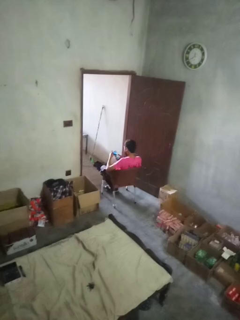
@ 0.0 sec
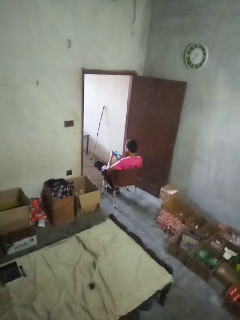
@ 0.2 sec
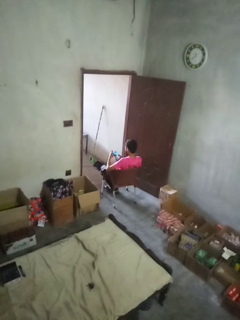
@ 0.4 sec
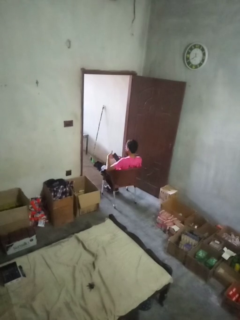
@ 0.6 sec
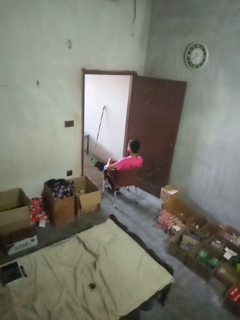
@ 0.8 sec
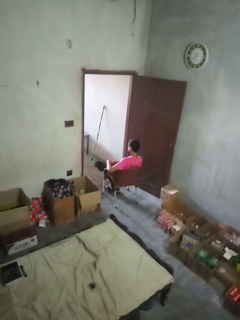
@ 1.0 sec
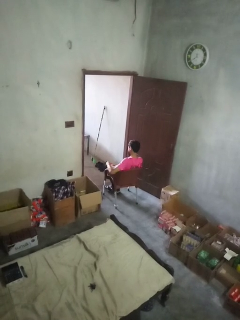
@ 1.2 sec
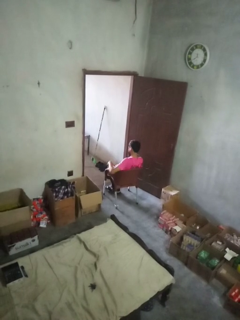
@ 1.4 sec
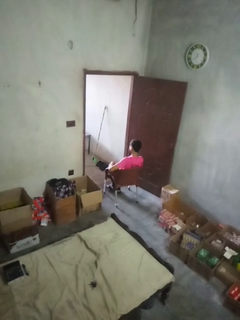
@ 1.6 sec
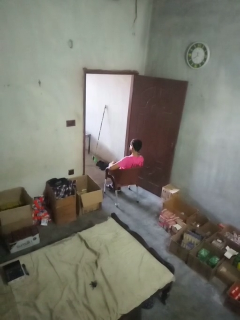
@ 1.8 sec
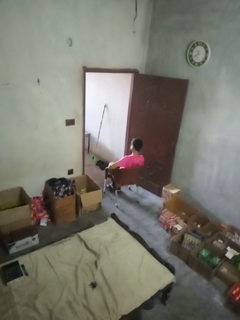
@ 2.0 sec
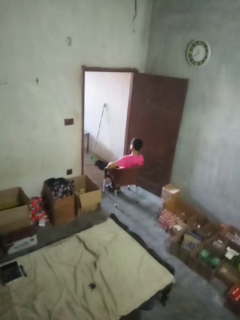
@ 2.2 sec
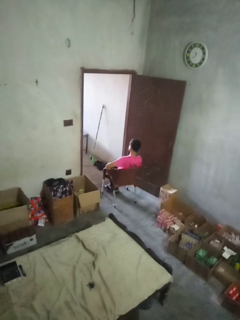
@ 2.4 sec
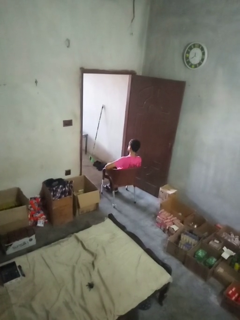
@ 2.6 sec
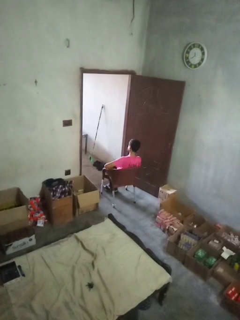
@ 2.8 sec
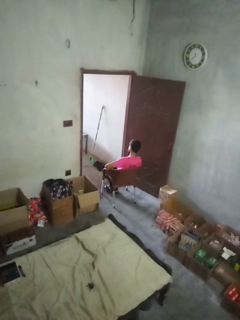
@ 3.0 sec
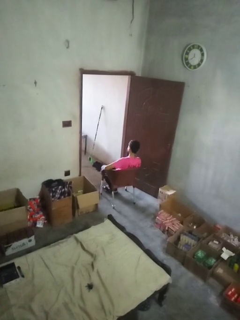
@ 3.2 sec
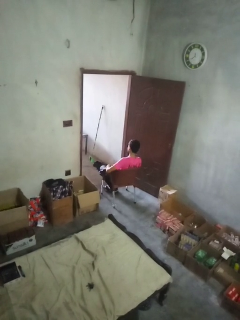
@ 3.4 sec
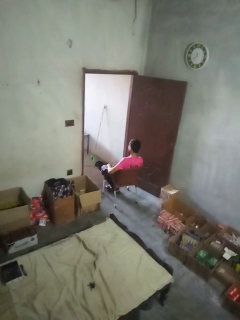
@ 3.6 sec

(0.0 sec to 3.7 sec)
person puts phone into pocket

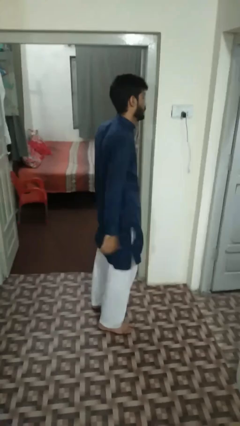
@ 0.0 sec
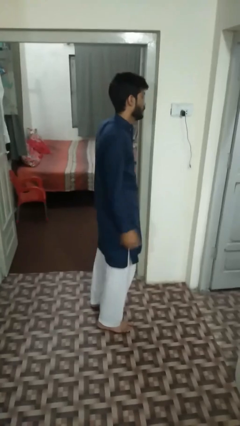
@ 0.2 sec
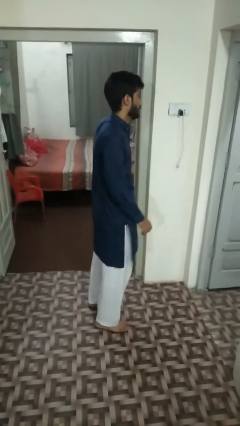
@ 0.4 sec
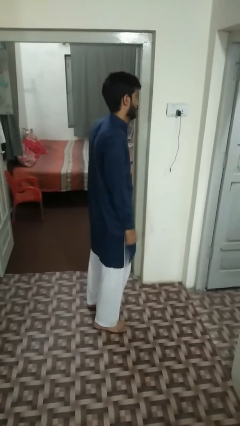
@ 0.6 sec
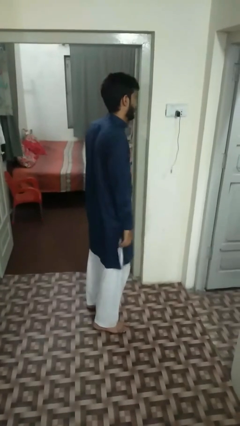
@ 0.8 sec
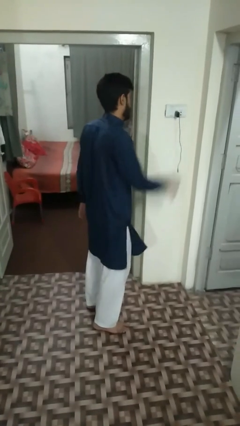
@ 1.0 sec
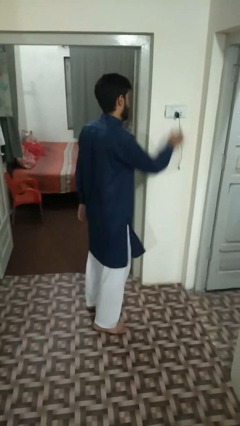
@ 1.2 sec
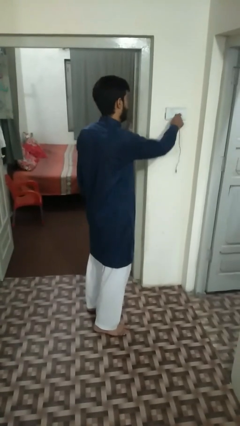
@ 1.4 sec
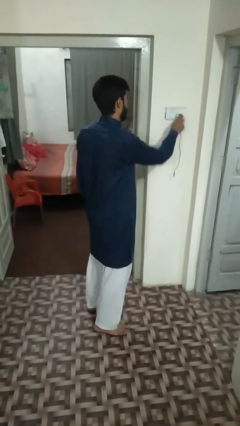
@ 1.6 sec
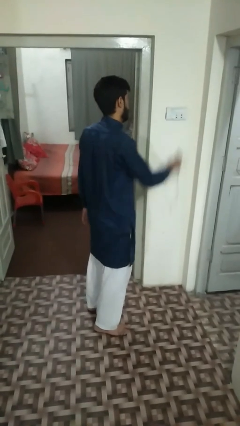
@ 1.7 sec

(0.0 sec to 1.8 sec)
person unplugs from electrical socket

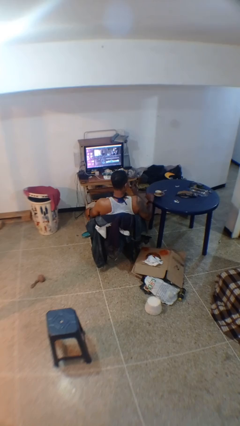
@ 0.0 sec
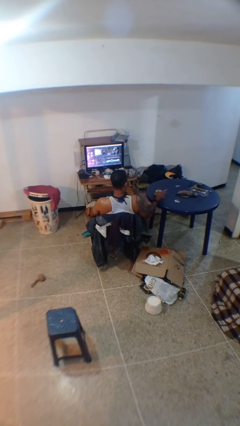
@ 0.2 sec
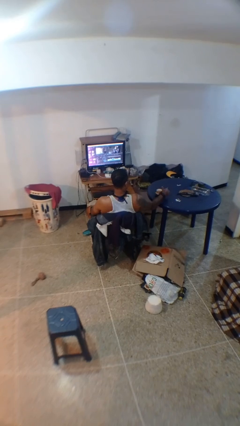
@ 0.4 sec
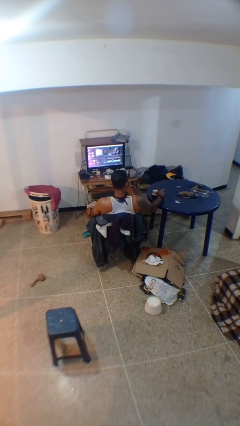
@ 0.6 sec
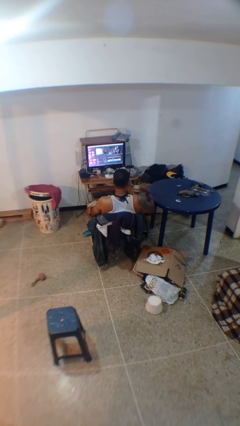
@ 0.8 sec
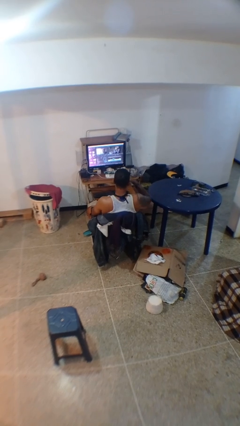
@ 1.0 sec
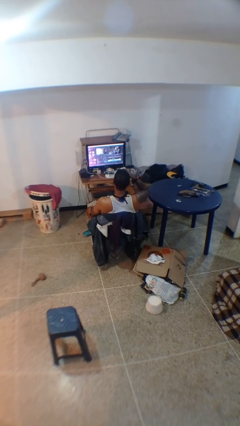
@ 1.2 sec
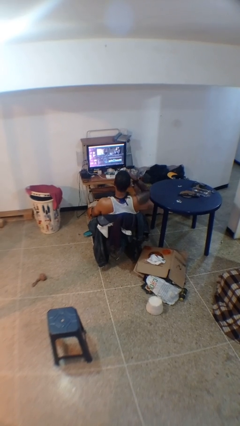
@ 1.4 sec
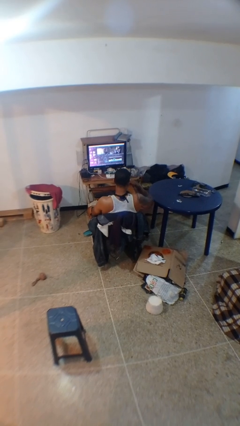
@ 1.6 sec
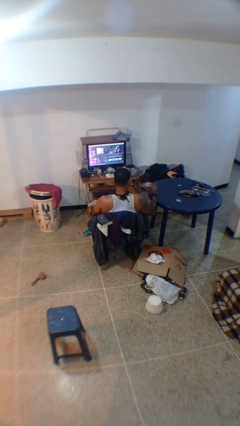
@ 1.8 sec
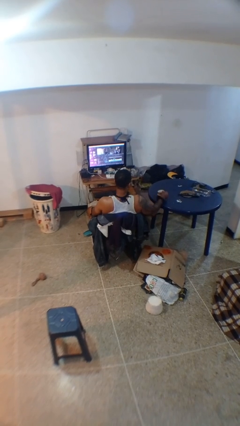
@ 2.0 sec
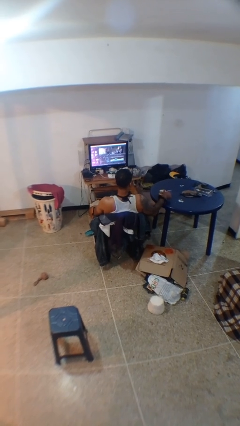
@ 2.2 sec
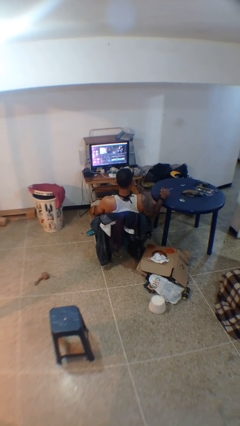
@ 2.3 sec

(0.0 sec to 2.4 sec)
person drinks from mug

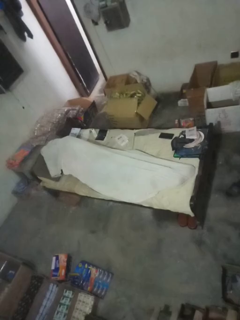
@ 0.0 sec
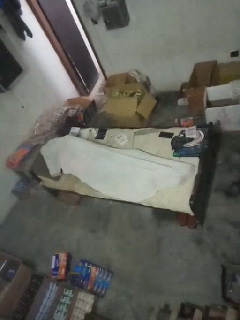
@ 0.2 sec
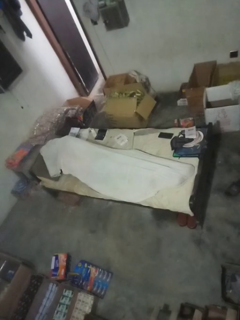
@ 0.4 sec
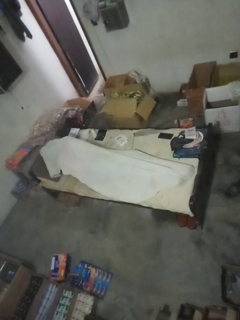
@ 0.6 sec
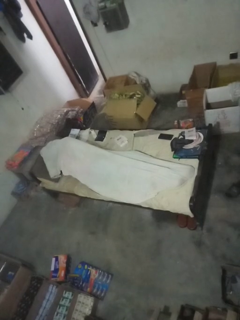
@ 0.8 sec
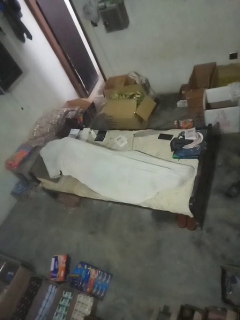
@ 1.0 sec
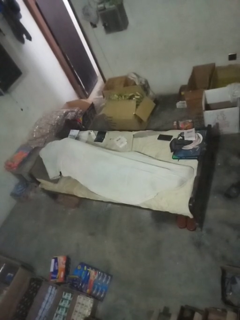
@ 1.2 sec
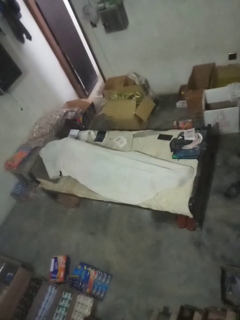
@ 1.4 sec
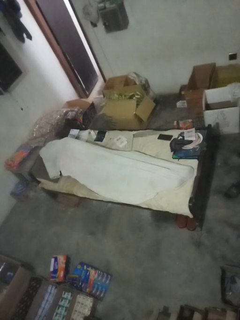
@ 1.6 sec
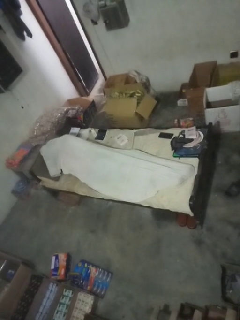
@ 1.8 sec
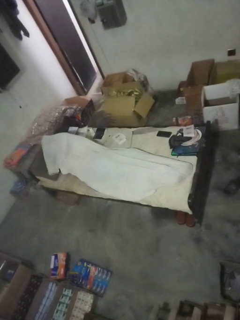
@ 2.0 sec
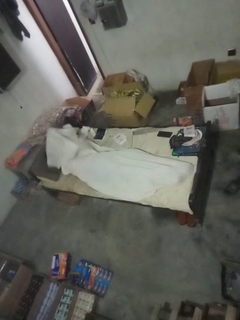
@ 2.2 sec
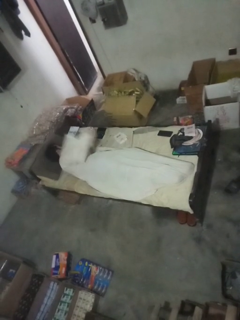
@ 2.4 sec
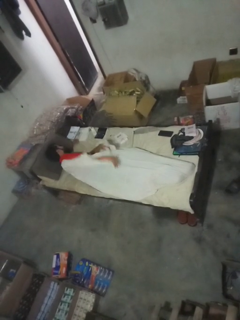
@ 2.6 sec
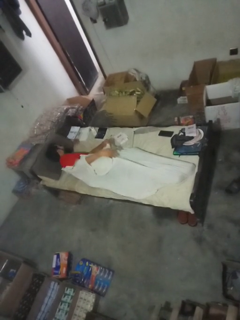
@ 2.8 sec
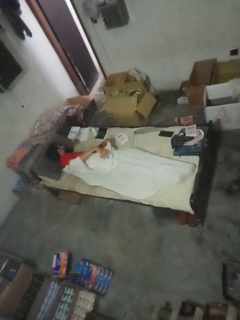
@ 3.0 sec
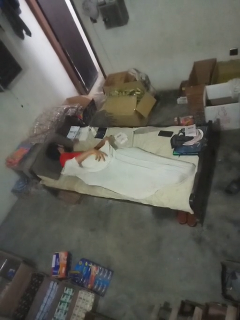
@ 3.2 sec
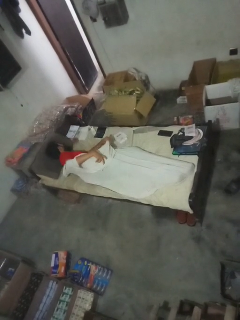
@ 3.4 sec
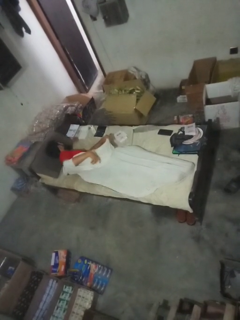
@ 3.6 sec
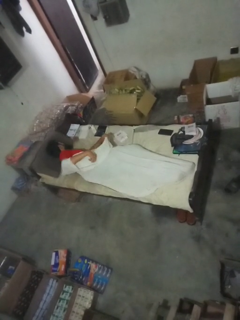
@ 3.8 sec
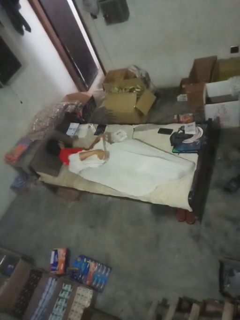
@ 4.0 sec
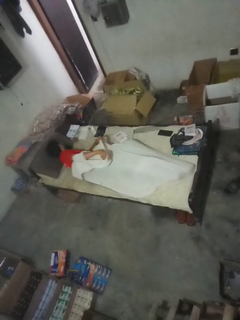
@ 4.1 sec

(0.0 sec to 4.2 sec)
person uncovers with bedsheets

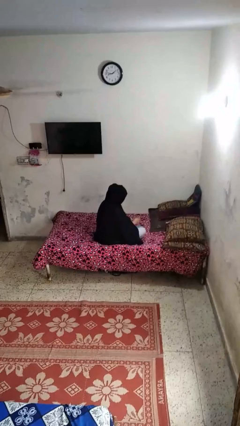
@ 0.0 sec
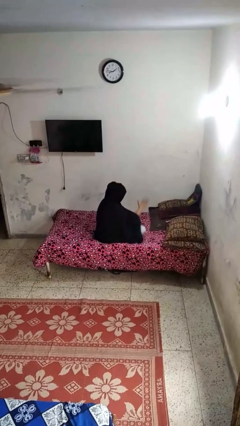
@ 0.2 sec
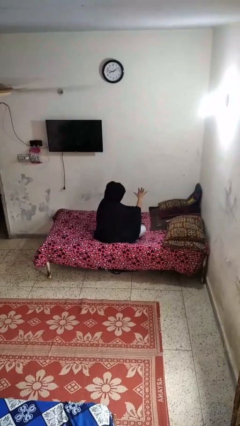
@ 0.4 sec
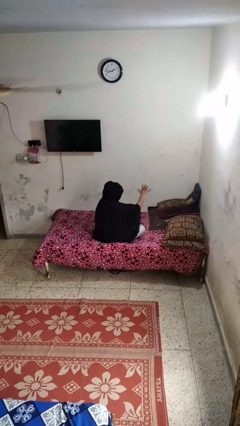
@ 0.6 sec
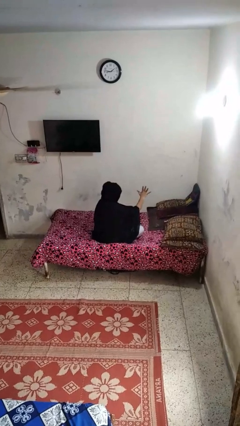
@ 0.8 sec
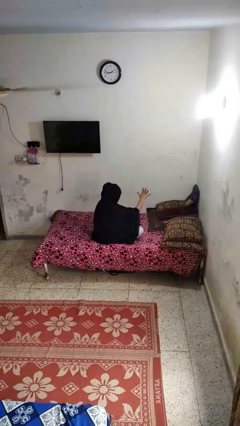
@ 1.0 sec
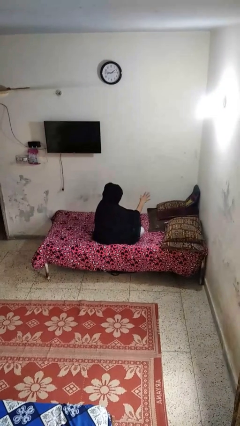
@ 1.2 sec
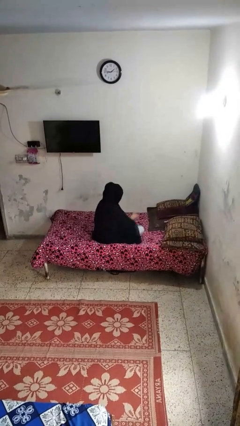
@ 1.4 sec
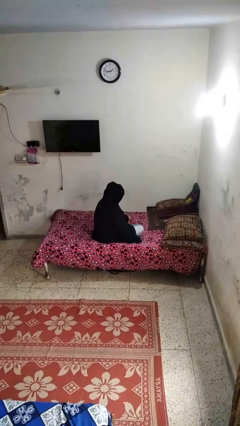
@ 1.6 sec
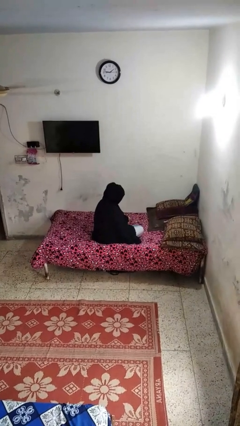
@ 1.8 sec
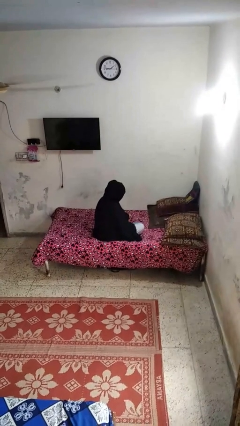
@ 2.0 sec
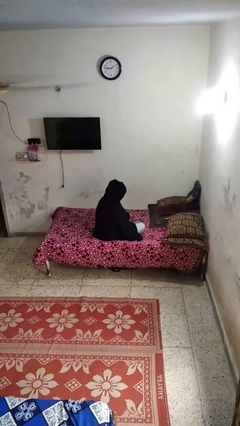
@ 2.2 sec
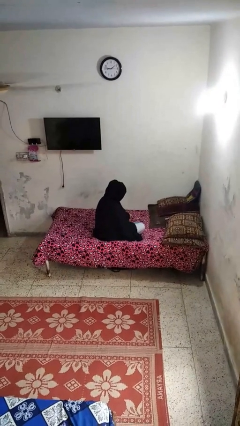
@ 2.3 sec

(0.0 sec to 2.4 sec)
person gestures number five

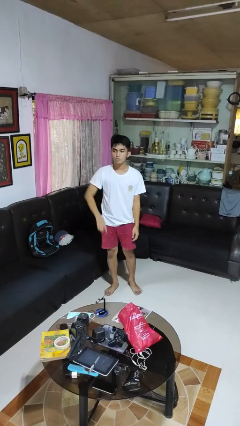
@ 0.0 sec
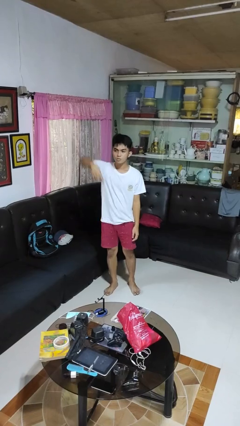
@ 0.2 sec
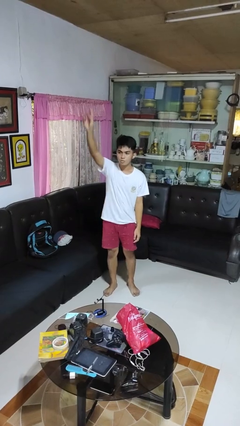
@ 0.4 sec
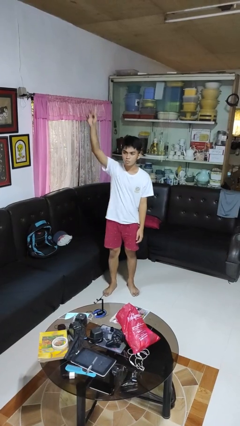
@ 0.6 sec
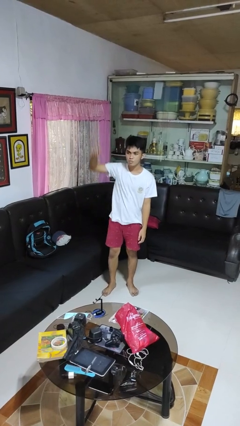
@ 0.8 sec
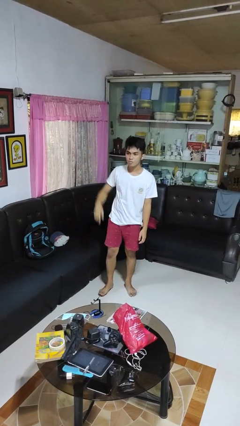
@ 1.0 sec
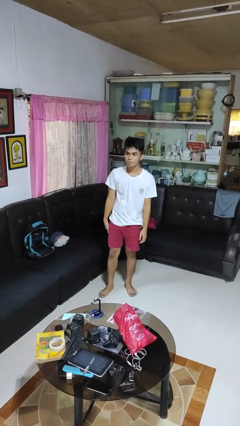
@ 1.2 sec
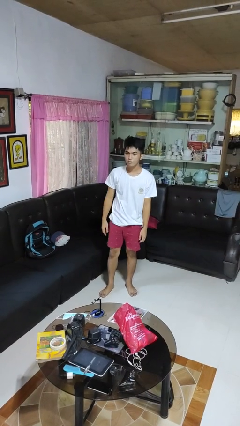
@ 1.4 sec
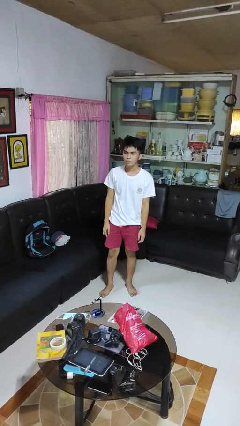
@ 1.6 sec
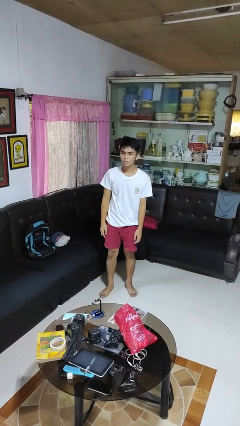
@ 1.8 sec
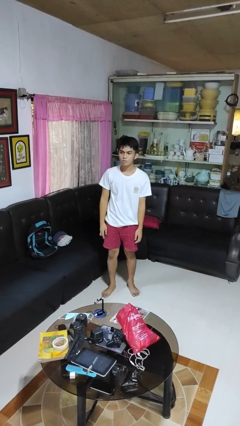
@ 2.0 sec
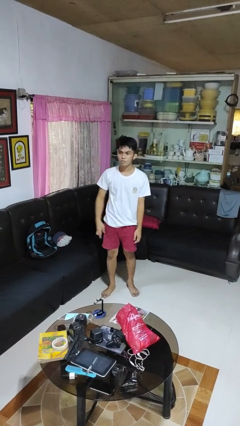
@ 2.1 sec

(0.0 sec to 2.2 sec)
person gestures swipe up

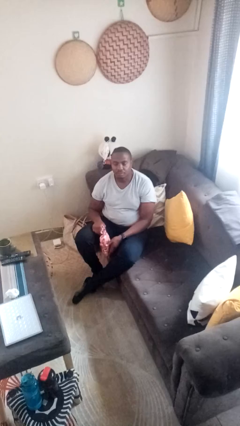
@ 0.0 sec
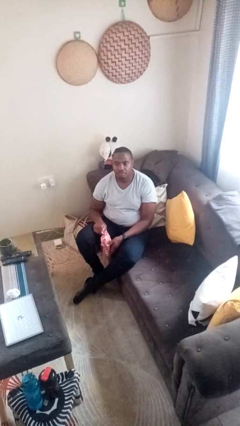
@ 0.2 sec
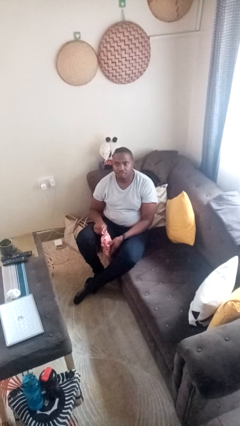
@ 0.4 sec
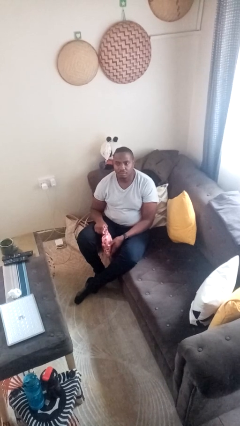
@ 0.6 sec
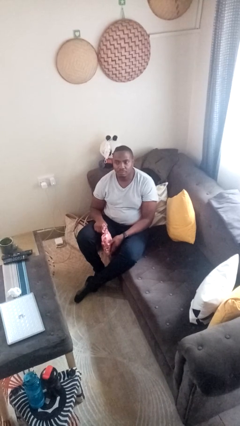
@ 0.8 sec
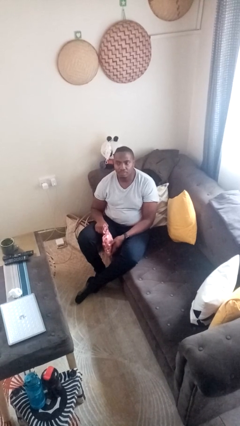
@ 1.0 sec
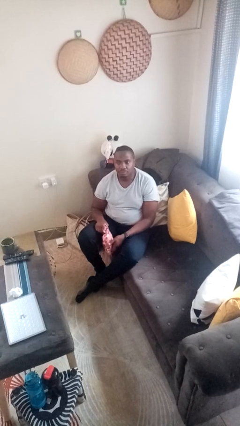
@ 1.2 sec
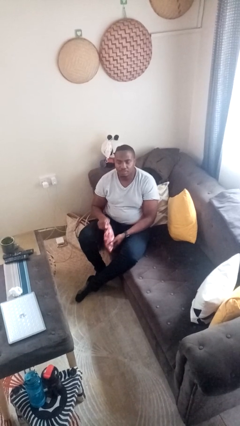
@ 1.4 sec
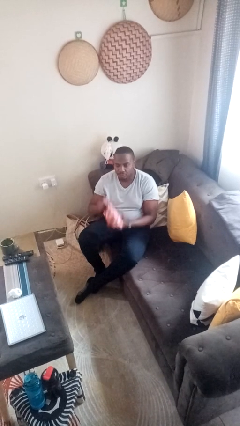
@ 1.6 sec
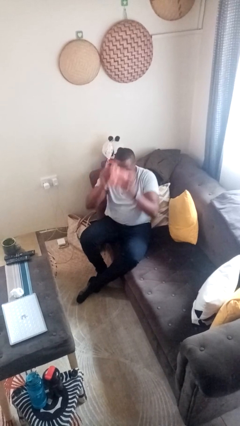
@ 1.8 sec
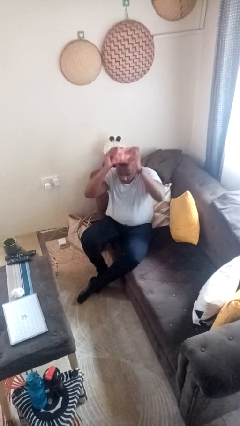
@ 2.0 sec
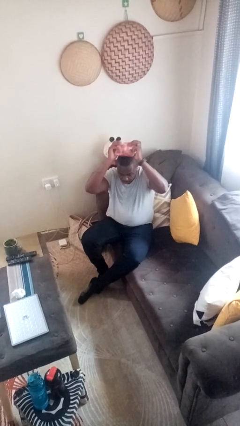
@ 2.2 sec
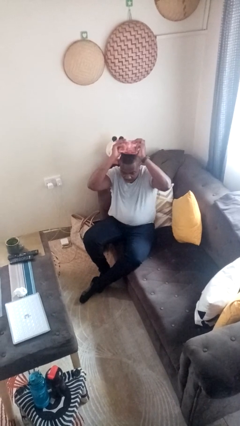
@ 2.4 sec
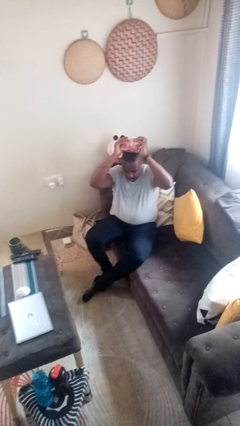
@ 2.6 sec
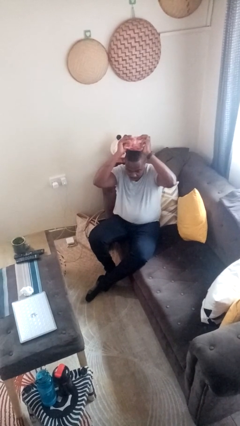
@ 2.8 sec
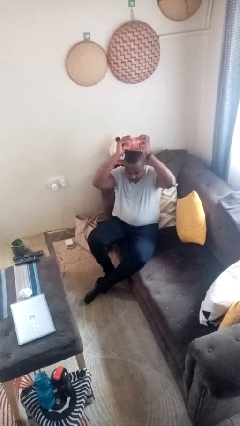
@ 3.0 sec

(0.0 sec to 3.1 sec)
person holds object above head
